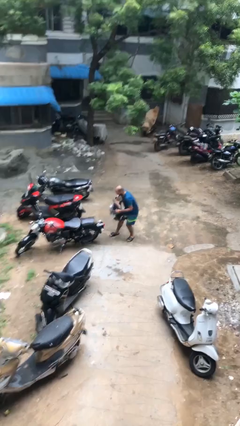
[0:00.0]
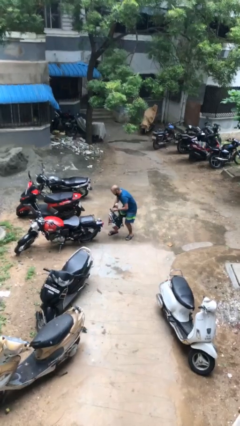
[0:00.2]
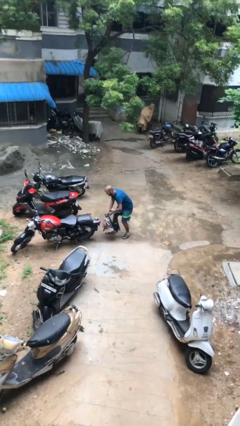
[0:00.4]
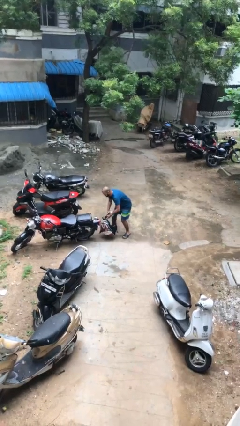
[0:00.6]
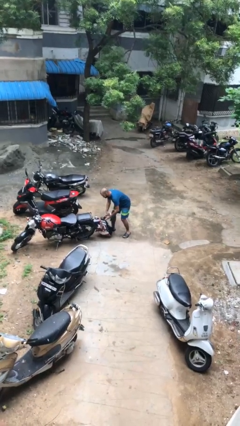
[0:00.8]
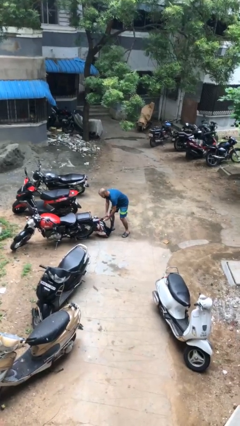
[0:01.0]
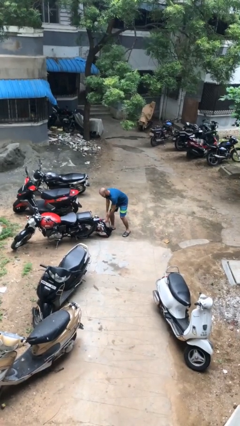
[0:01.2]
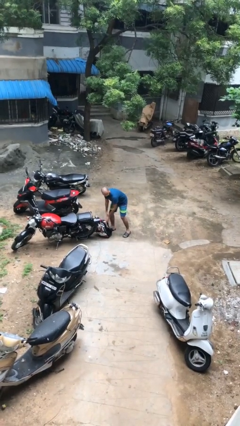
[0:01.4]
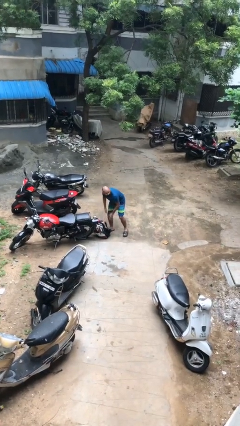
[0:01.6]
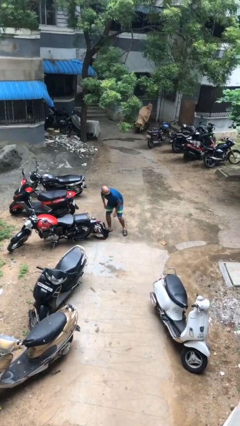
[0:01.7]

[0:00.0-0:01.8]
person puts down object on floor

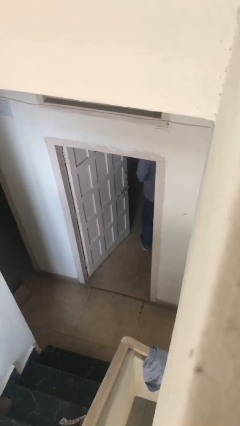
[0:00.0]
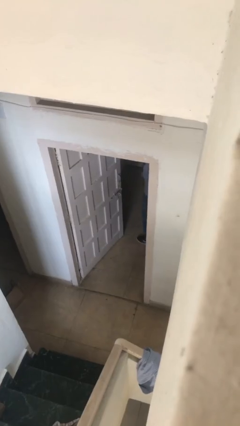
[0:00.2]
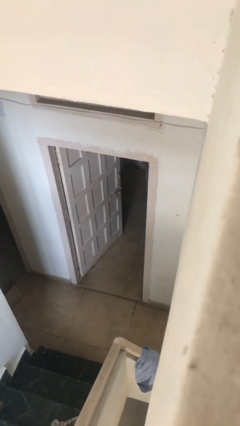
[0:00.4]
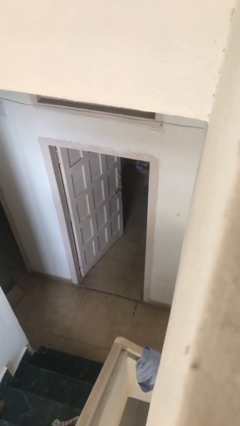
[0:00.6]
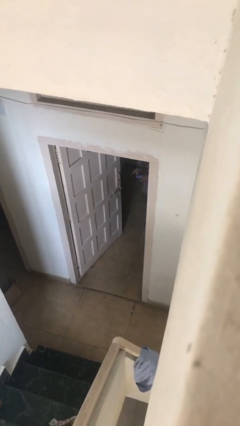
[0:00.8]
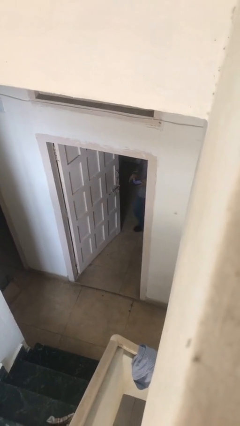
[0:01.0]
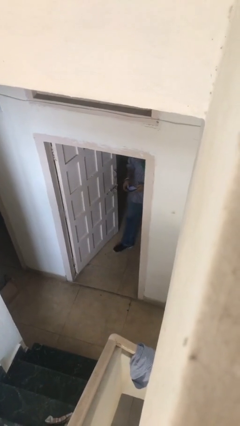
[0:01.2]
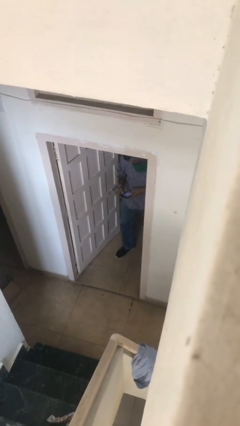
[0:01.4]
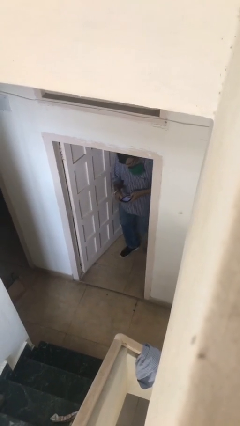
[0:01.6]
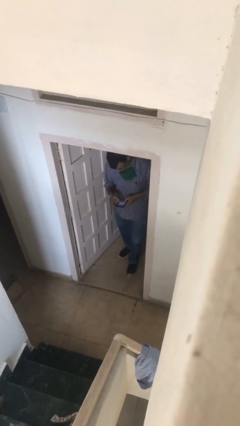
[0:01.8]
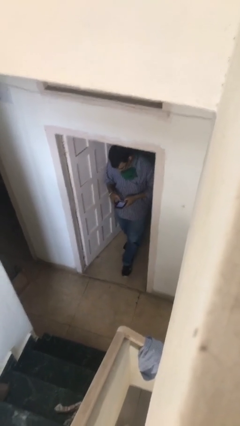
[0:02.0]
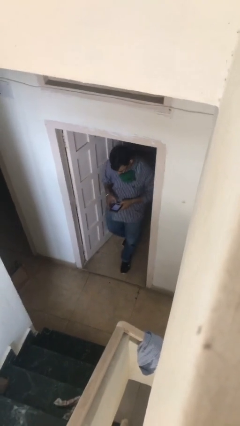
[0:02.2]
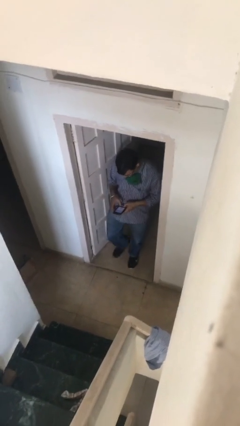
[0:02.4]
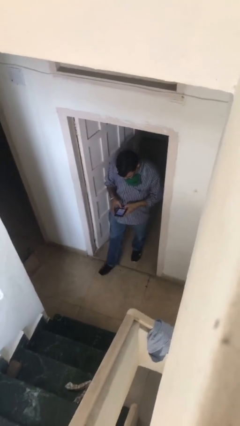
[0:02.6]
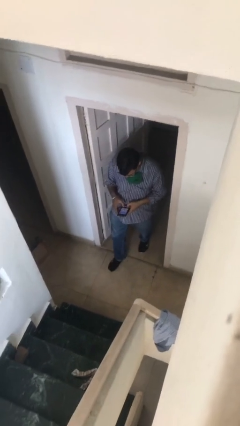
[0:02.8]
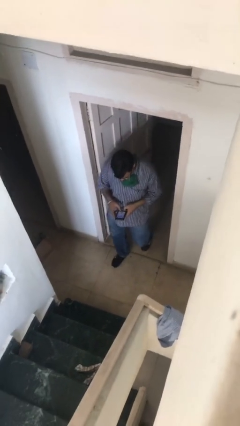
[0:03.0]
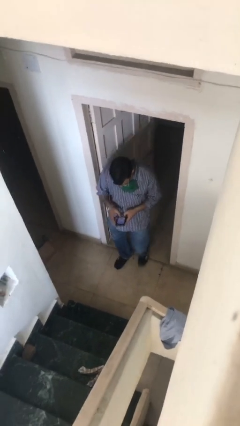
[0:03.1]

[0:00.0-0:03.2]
person enters scene through structure

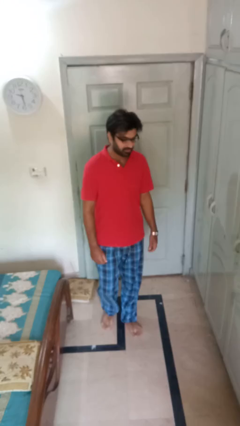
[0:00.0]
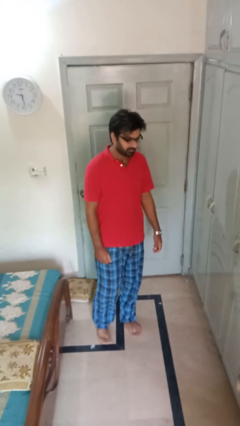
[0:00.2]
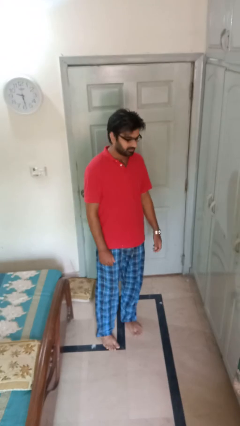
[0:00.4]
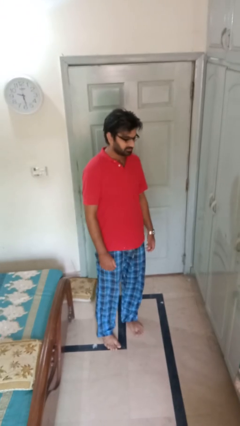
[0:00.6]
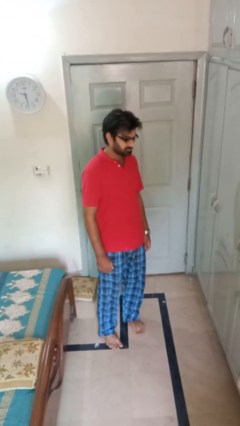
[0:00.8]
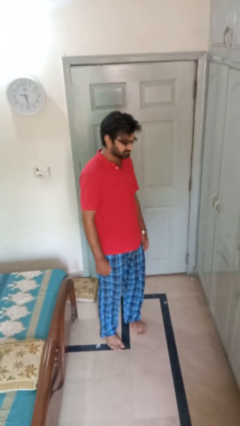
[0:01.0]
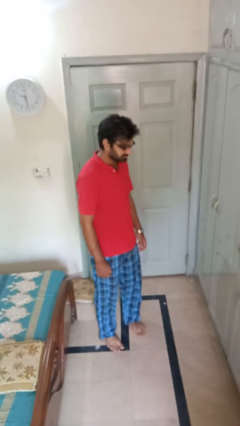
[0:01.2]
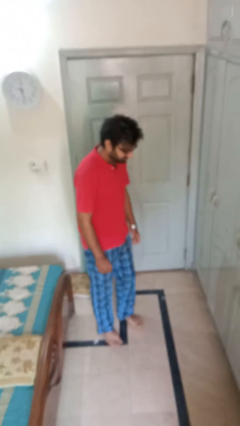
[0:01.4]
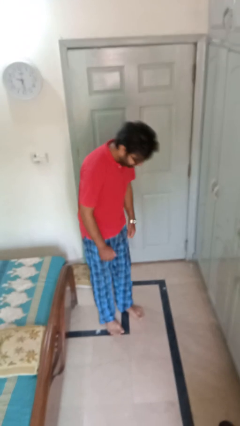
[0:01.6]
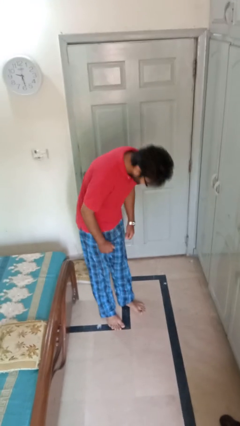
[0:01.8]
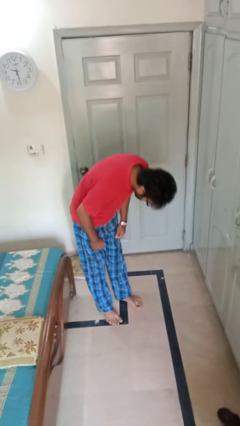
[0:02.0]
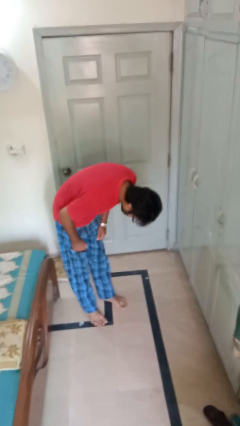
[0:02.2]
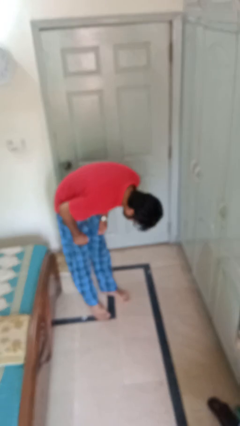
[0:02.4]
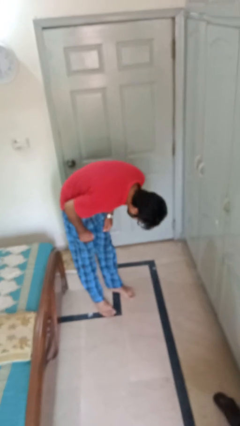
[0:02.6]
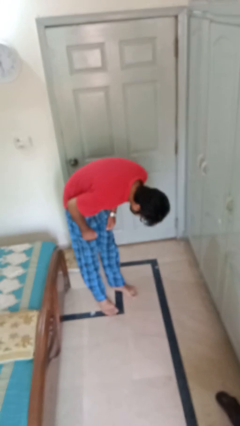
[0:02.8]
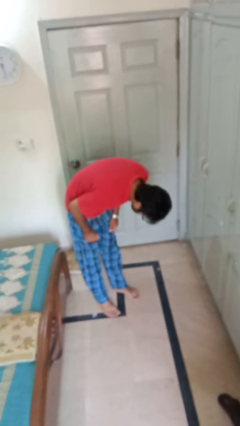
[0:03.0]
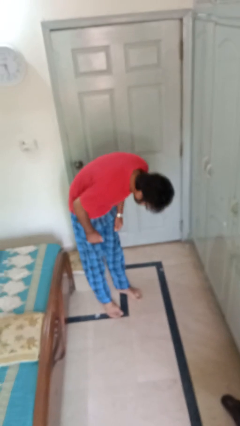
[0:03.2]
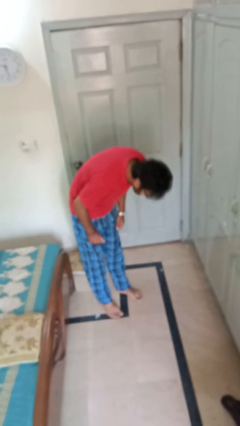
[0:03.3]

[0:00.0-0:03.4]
person bows

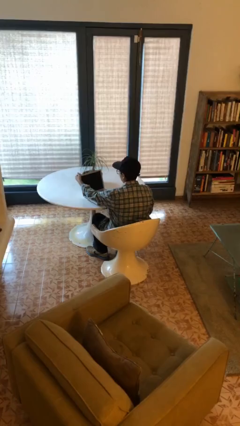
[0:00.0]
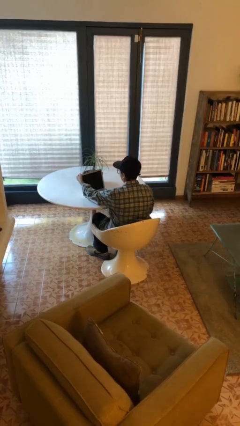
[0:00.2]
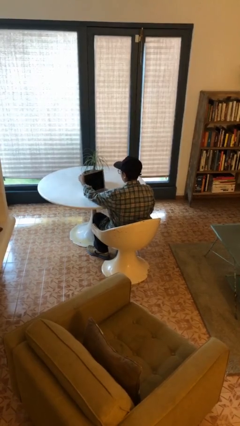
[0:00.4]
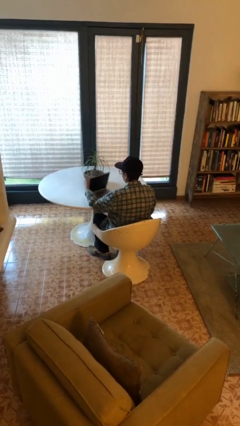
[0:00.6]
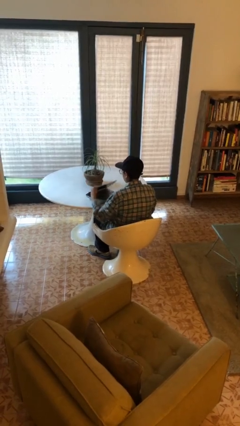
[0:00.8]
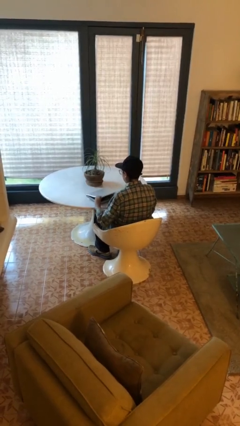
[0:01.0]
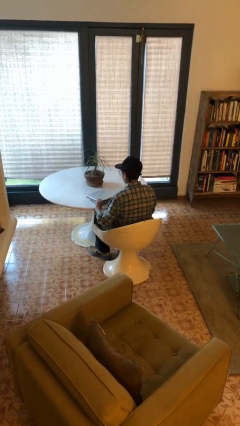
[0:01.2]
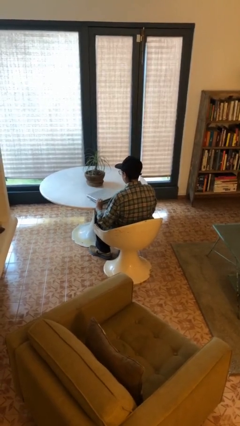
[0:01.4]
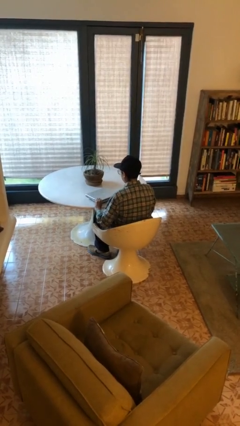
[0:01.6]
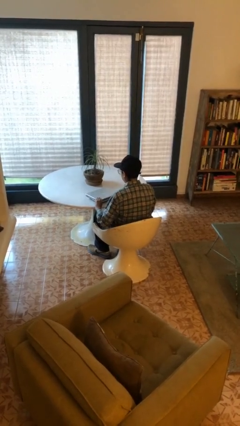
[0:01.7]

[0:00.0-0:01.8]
person closes laptop

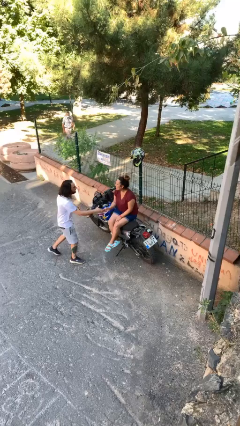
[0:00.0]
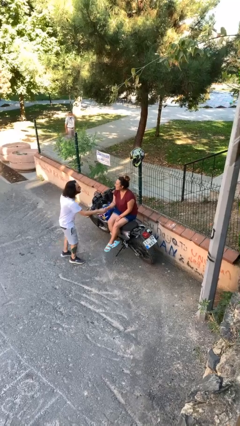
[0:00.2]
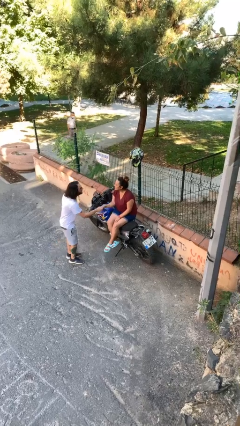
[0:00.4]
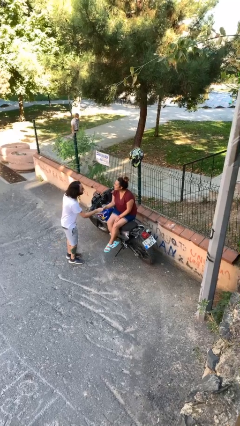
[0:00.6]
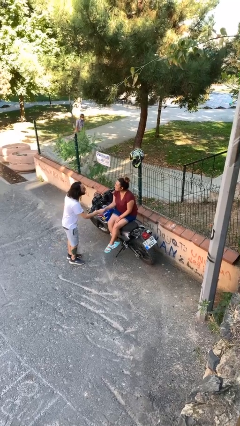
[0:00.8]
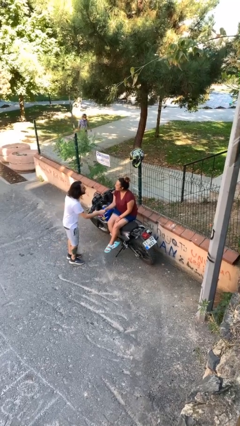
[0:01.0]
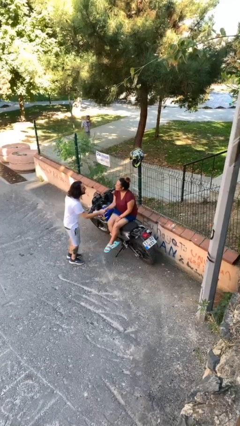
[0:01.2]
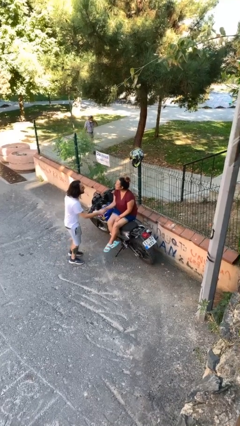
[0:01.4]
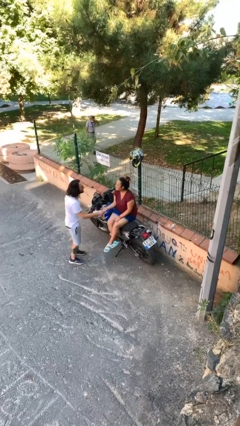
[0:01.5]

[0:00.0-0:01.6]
person shakes hand

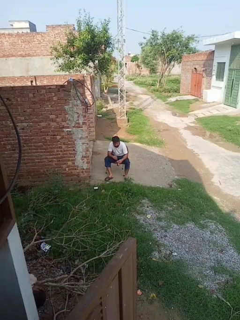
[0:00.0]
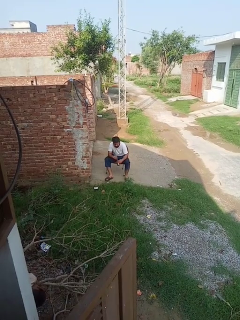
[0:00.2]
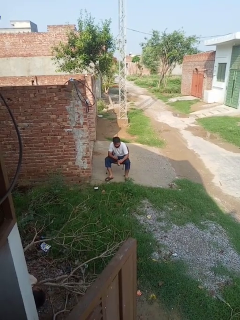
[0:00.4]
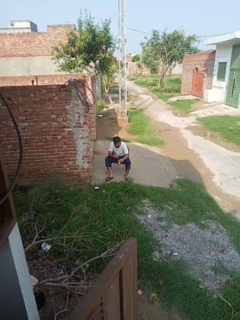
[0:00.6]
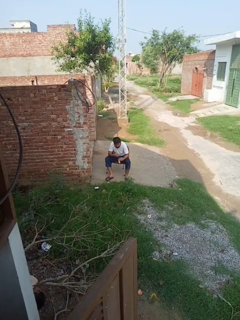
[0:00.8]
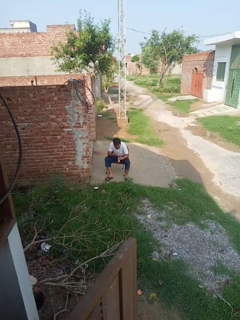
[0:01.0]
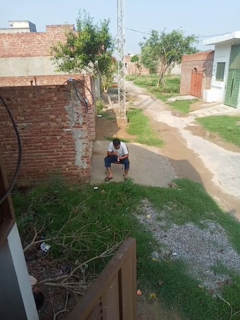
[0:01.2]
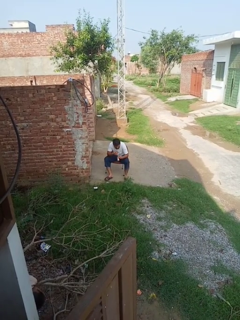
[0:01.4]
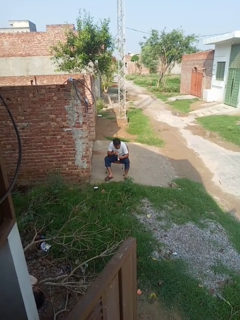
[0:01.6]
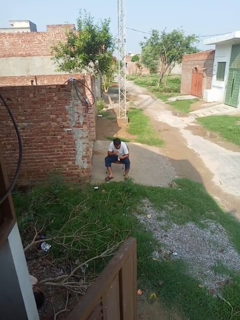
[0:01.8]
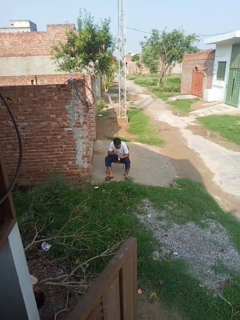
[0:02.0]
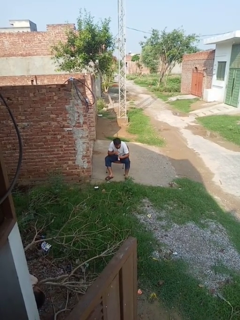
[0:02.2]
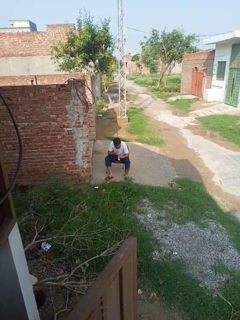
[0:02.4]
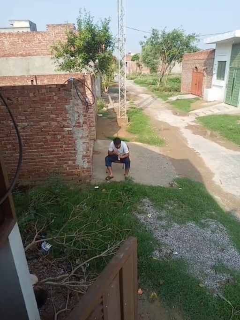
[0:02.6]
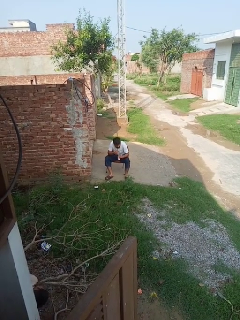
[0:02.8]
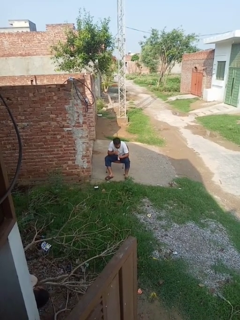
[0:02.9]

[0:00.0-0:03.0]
person drinks from straw

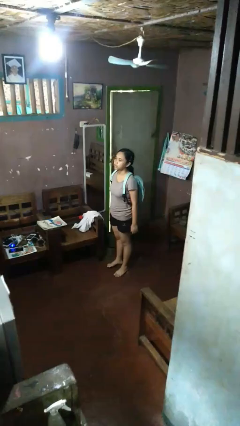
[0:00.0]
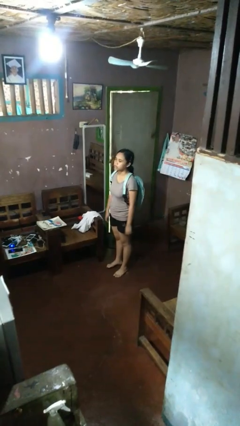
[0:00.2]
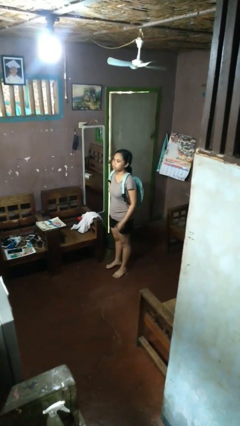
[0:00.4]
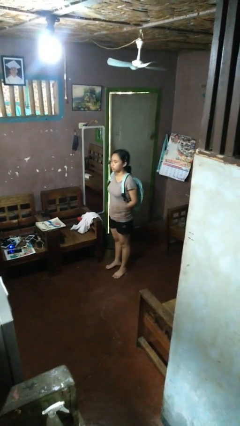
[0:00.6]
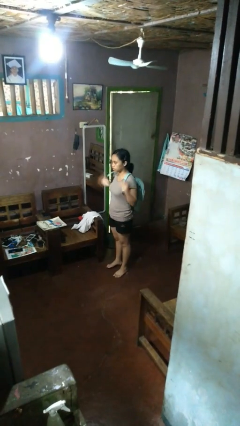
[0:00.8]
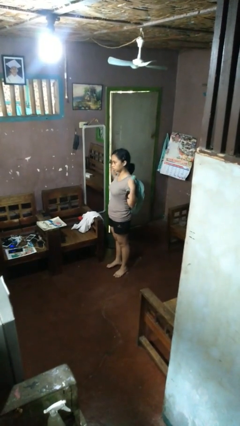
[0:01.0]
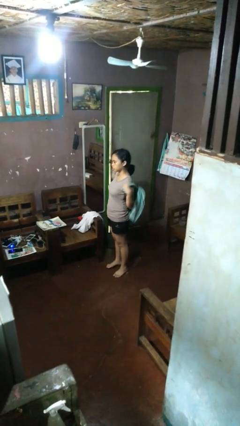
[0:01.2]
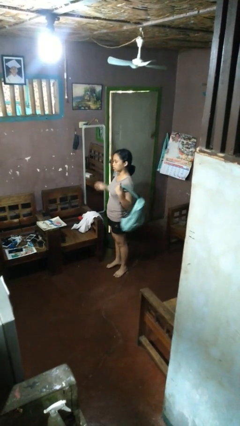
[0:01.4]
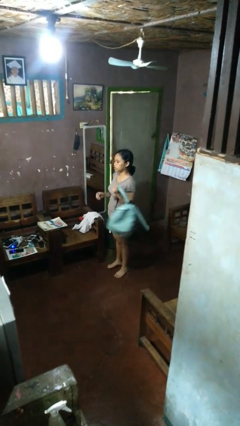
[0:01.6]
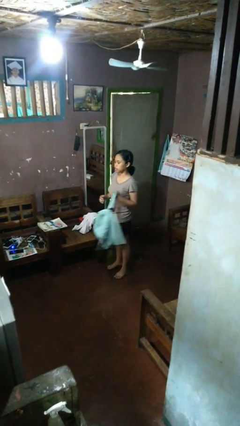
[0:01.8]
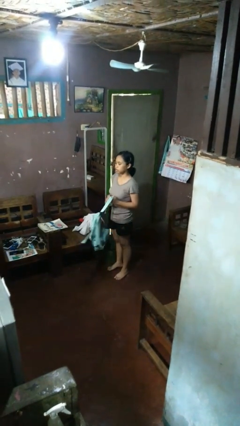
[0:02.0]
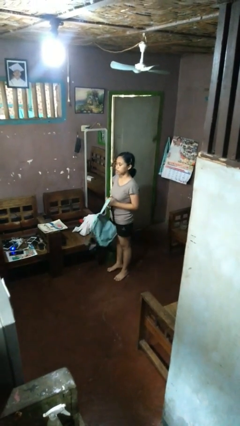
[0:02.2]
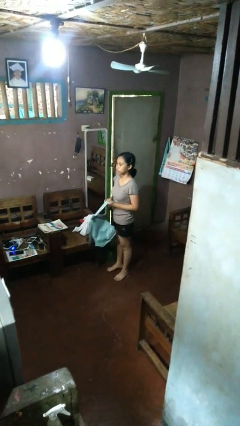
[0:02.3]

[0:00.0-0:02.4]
person takes off backpack

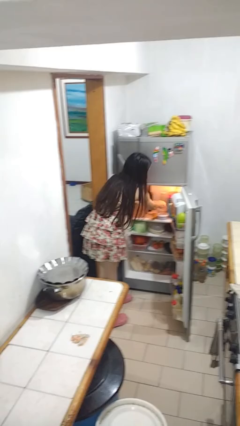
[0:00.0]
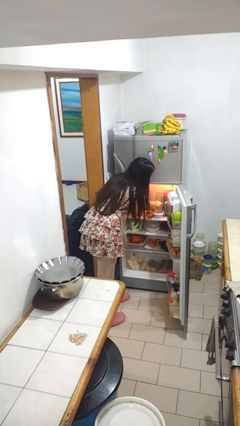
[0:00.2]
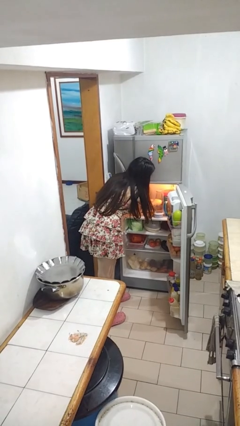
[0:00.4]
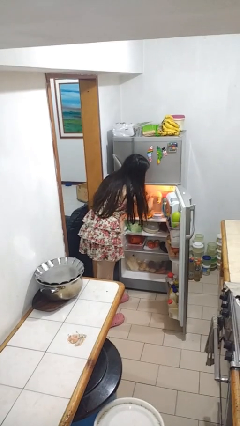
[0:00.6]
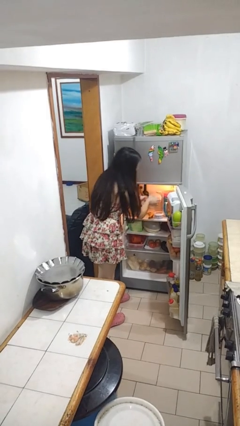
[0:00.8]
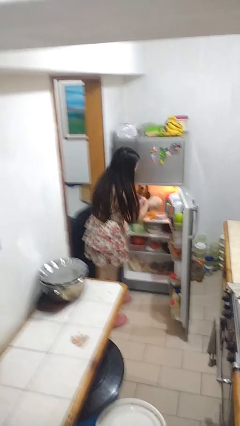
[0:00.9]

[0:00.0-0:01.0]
person takes object from refrigerator
